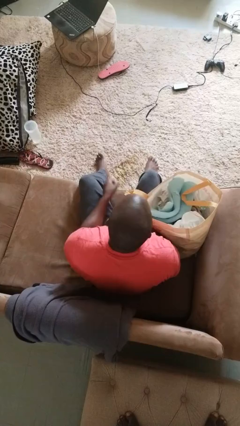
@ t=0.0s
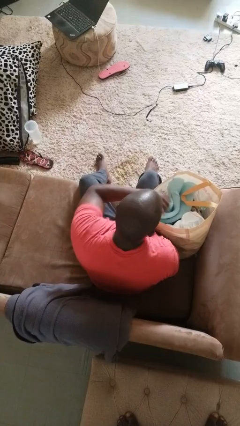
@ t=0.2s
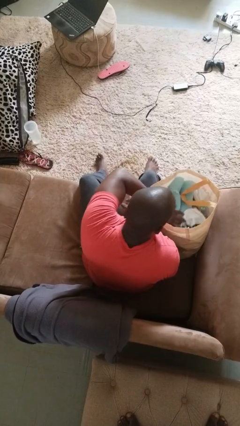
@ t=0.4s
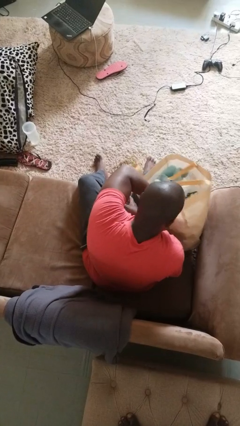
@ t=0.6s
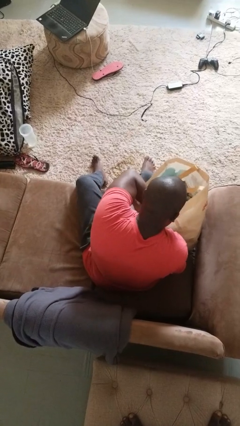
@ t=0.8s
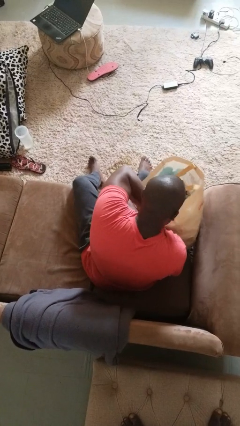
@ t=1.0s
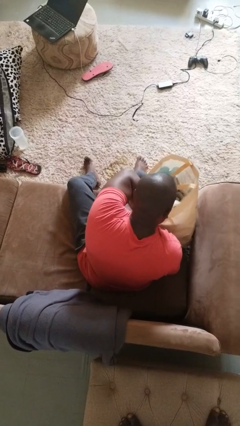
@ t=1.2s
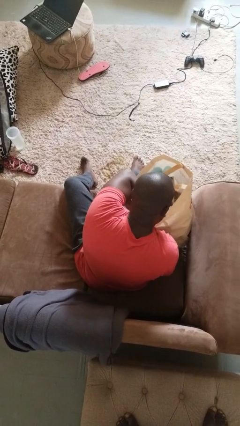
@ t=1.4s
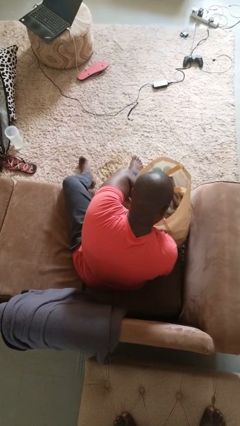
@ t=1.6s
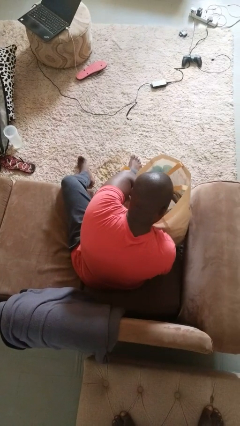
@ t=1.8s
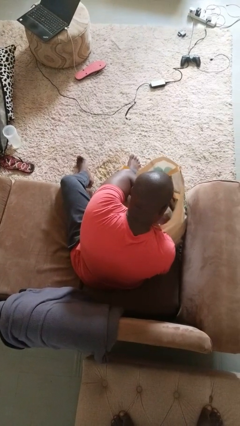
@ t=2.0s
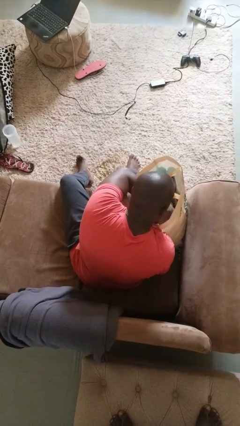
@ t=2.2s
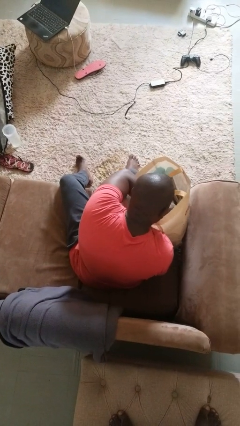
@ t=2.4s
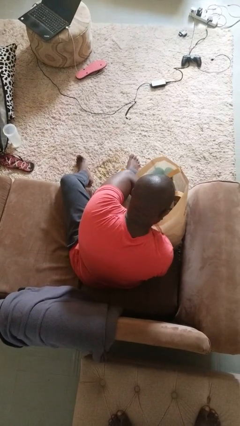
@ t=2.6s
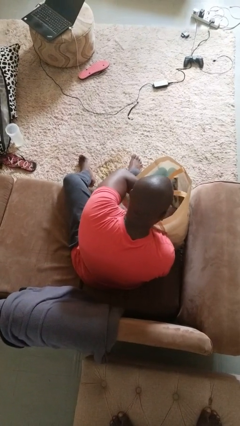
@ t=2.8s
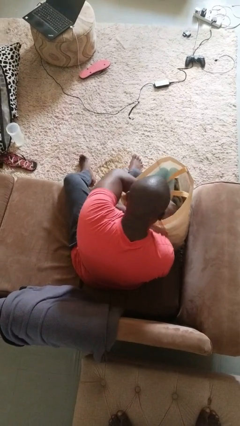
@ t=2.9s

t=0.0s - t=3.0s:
person searches in bag

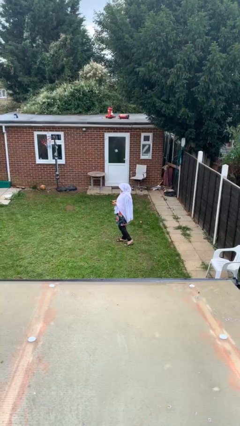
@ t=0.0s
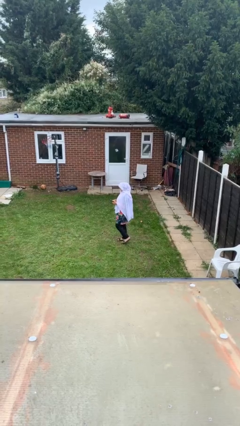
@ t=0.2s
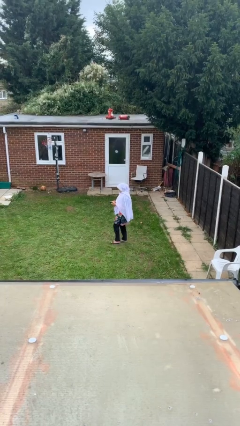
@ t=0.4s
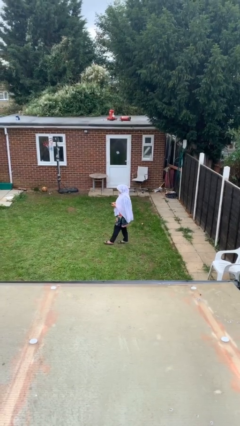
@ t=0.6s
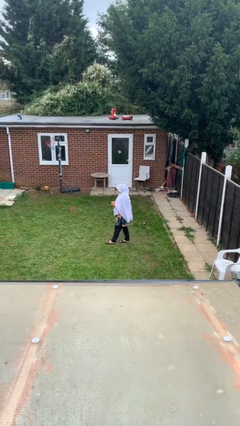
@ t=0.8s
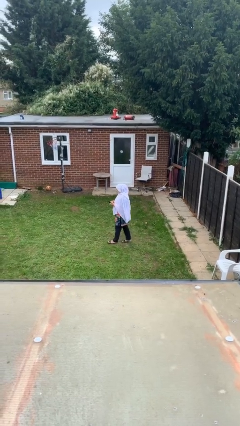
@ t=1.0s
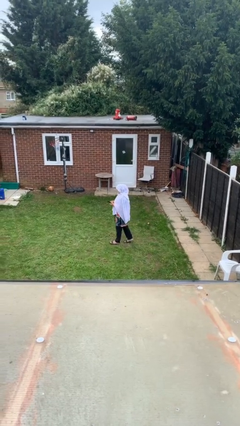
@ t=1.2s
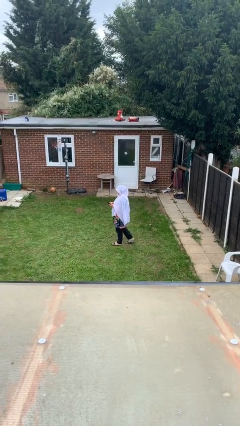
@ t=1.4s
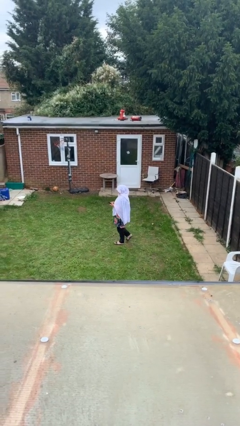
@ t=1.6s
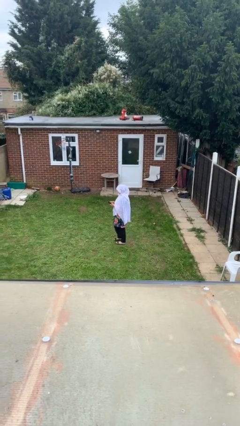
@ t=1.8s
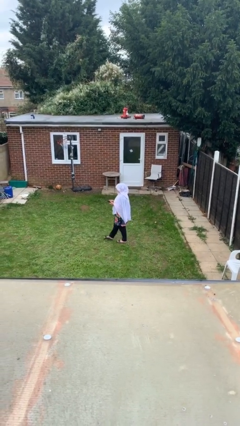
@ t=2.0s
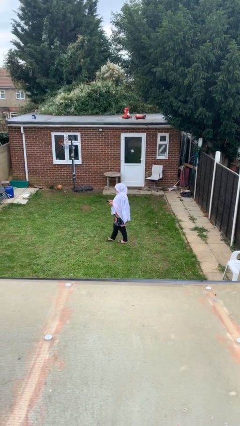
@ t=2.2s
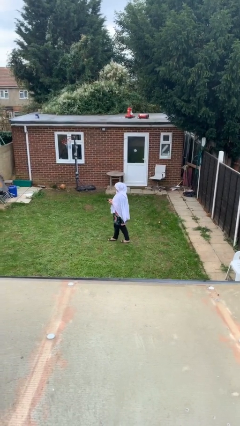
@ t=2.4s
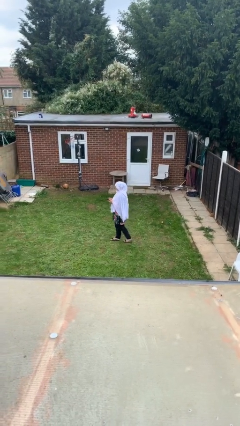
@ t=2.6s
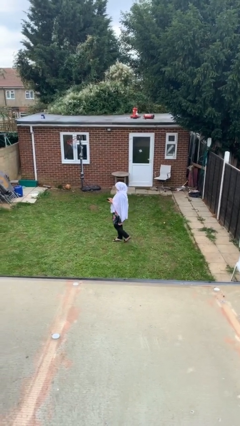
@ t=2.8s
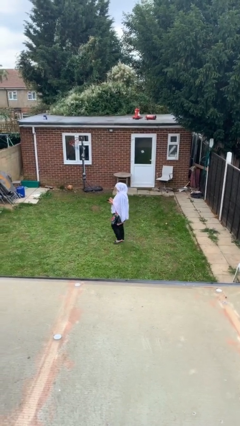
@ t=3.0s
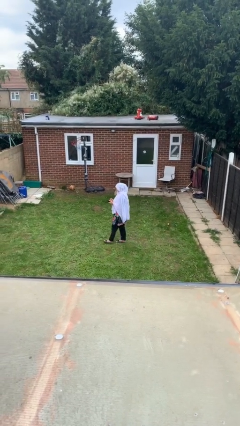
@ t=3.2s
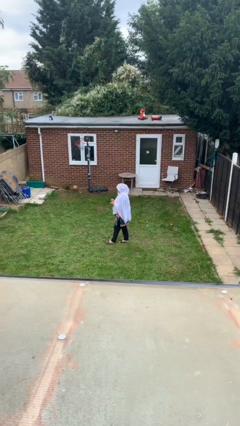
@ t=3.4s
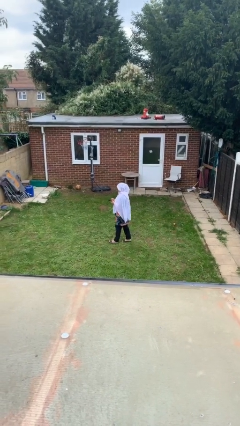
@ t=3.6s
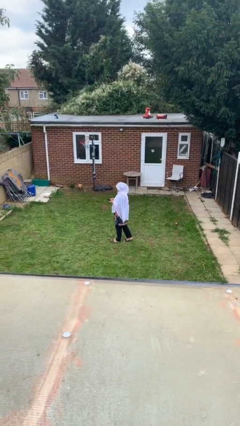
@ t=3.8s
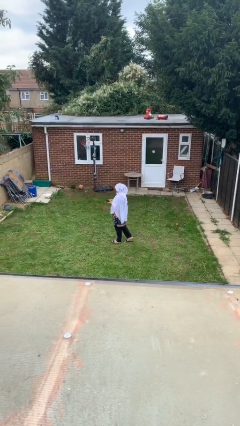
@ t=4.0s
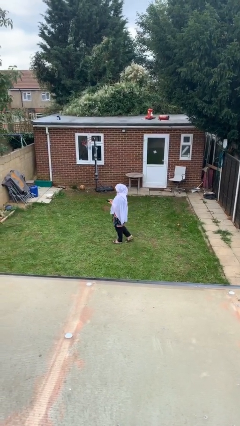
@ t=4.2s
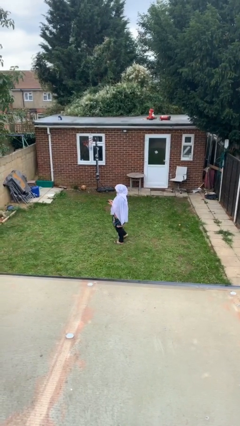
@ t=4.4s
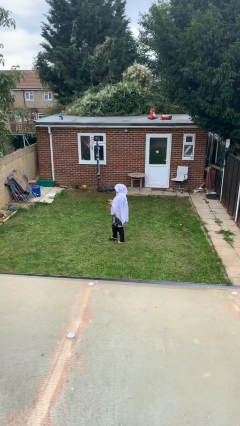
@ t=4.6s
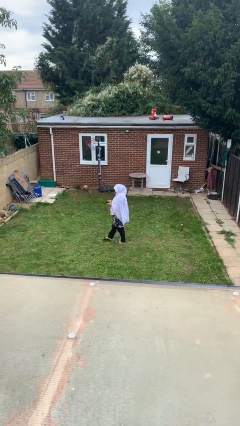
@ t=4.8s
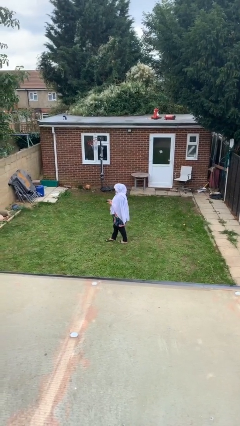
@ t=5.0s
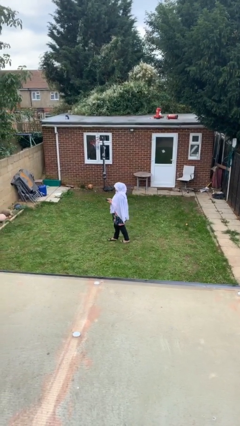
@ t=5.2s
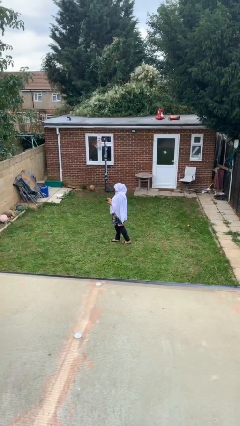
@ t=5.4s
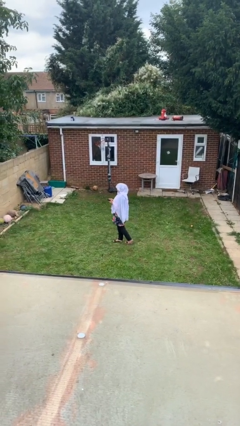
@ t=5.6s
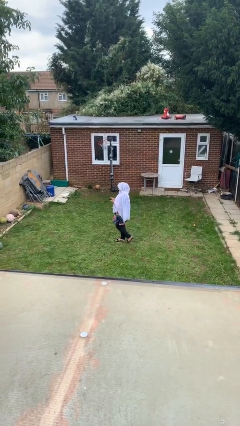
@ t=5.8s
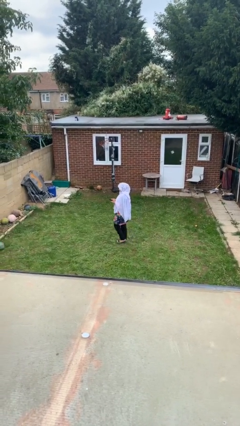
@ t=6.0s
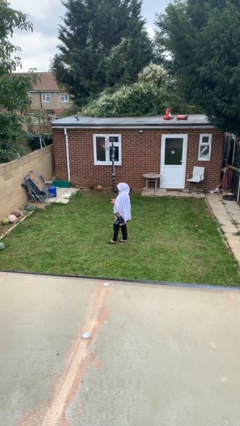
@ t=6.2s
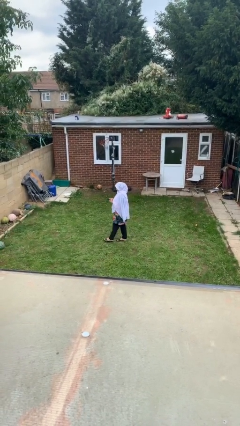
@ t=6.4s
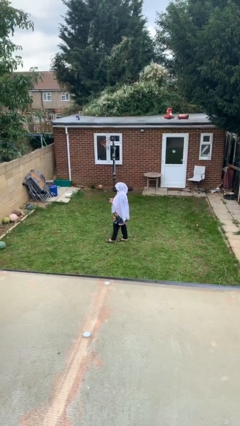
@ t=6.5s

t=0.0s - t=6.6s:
person texts on phone

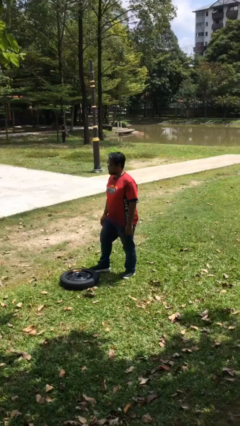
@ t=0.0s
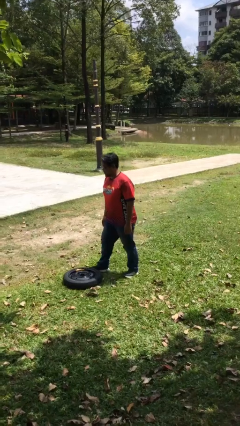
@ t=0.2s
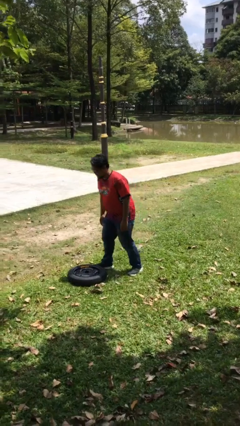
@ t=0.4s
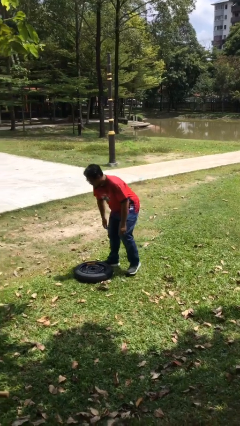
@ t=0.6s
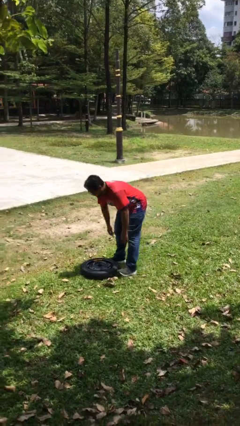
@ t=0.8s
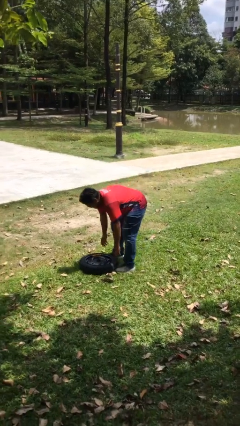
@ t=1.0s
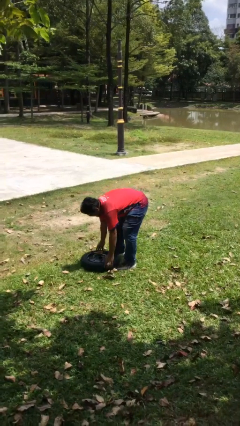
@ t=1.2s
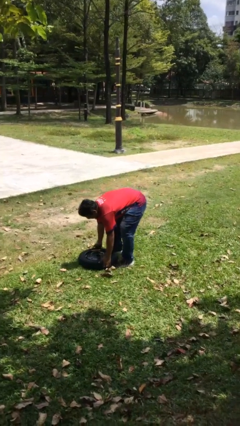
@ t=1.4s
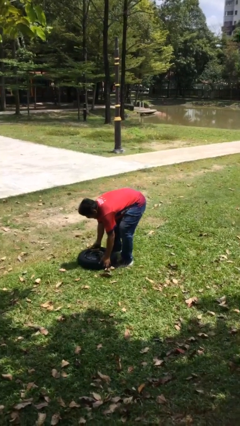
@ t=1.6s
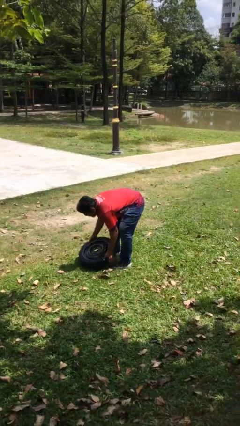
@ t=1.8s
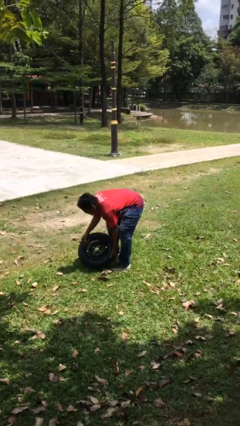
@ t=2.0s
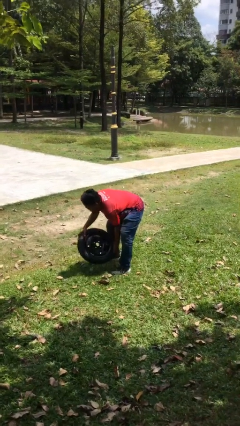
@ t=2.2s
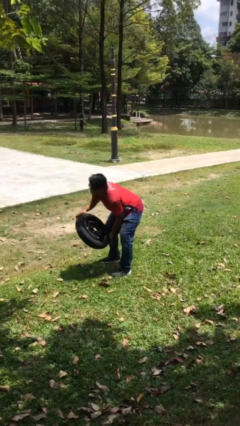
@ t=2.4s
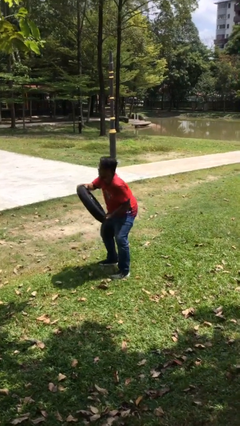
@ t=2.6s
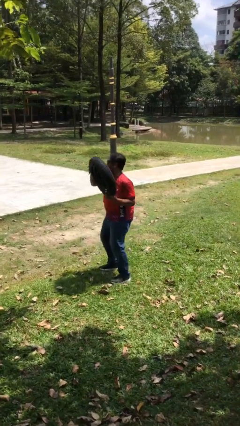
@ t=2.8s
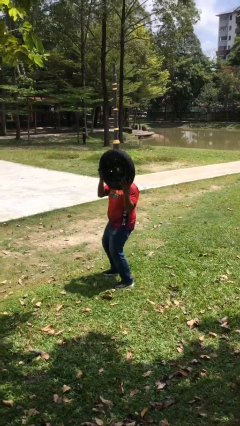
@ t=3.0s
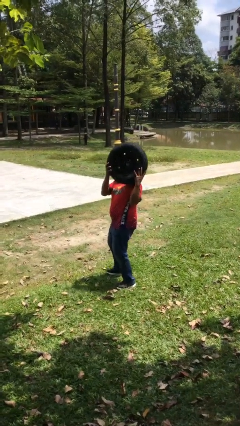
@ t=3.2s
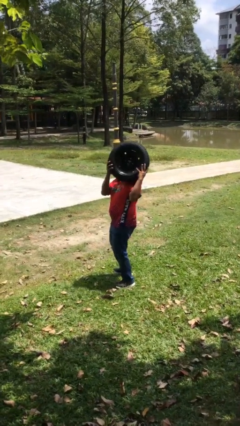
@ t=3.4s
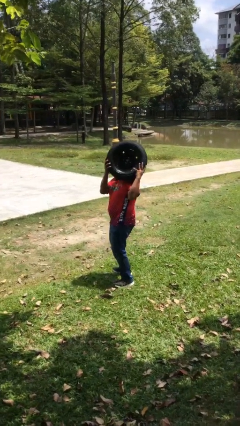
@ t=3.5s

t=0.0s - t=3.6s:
person picks up object from floor

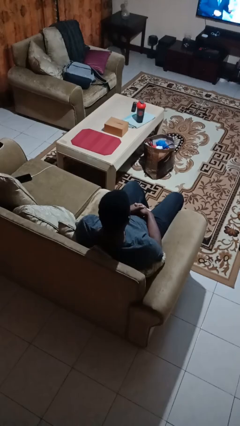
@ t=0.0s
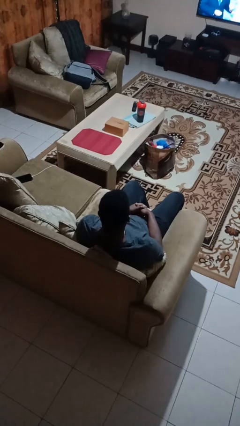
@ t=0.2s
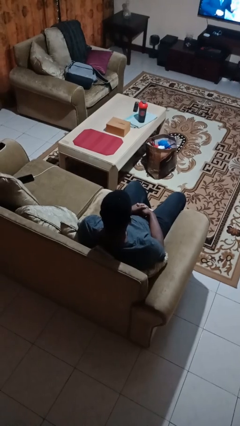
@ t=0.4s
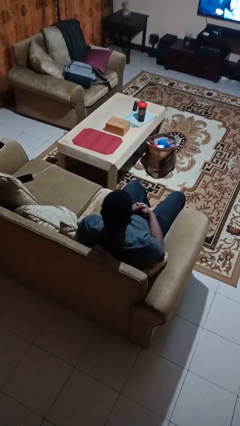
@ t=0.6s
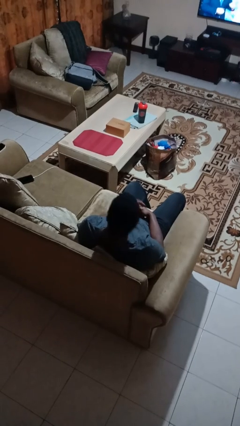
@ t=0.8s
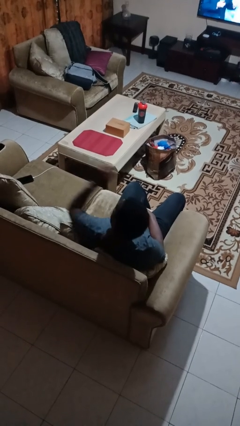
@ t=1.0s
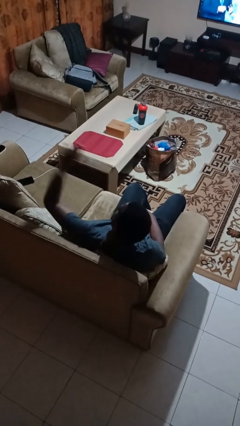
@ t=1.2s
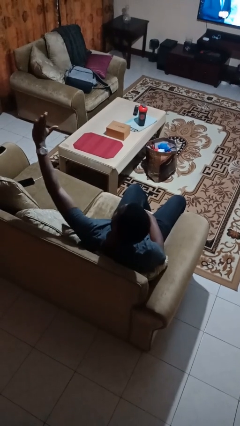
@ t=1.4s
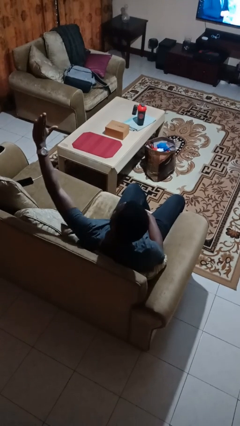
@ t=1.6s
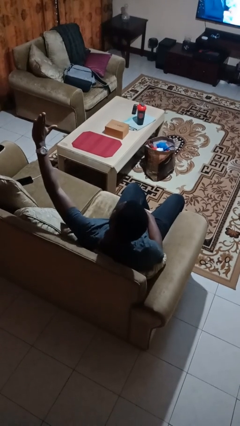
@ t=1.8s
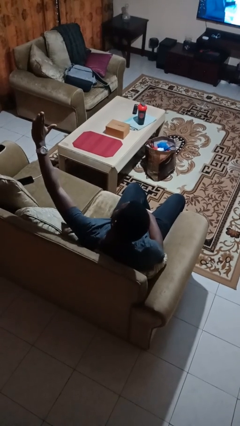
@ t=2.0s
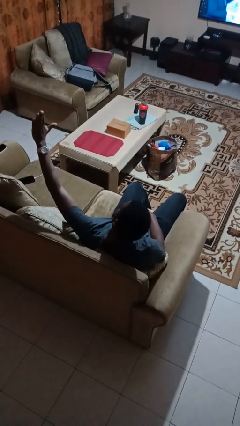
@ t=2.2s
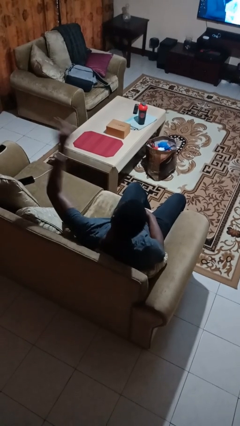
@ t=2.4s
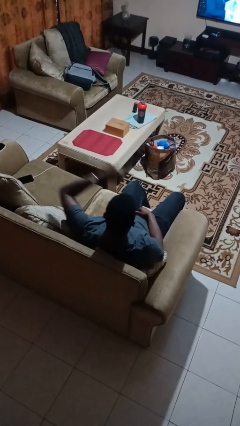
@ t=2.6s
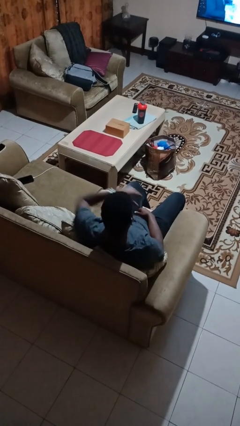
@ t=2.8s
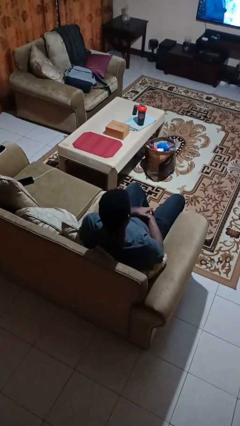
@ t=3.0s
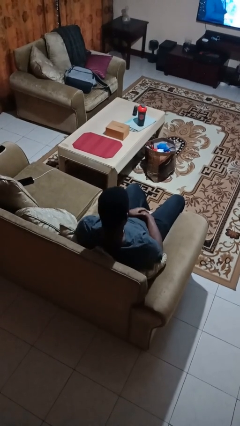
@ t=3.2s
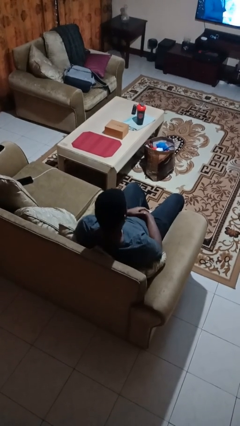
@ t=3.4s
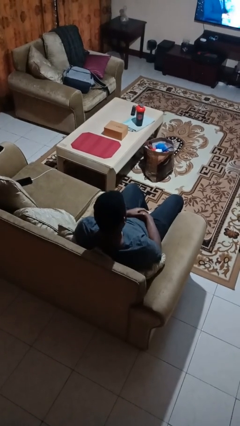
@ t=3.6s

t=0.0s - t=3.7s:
person gestures stop

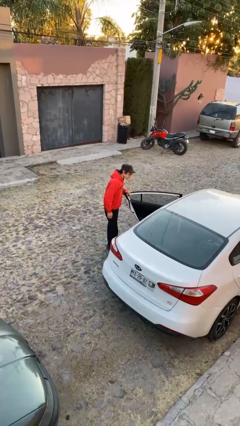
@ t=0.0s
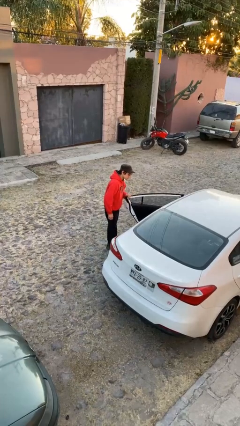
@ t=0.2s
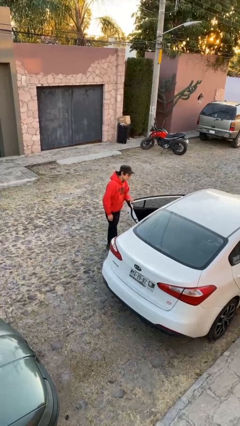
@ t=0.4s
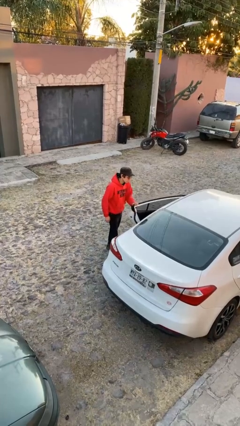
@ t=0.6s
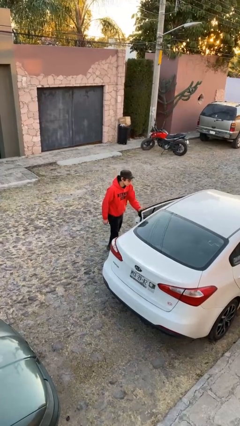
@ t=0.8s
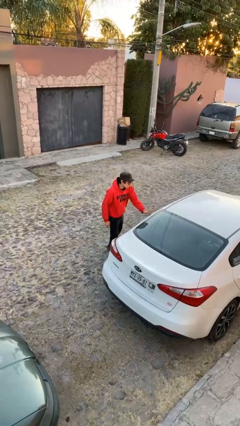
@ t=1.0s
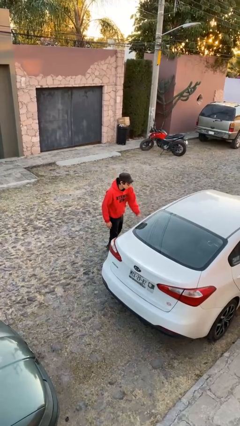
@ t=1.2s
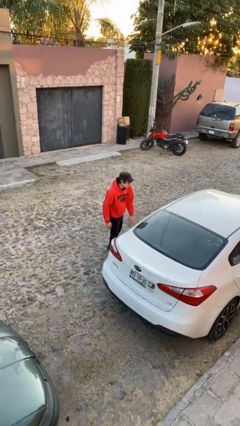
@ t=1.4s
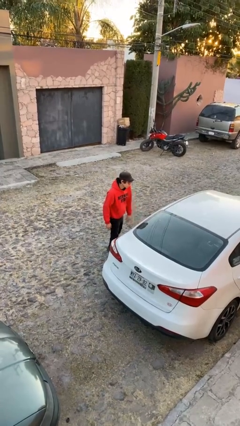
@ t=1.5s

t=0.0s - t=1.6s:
person closes car door
